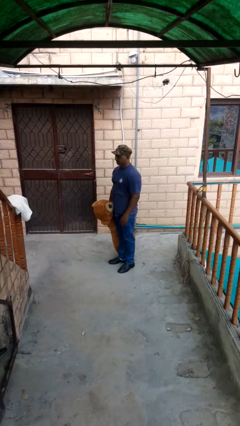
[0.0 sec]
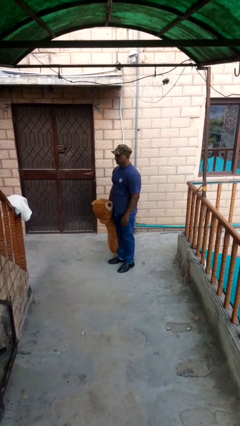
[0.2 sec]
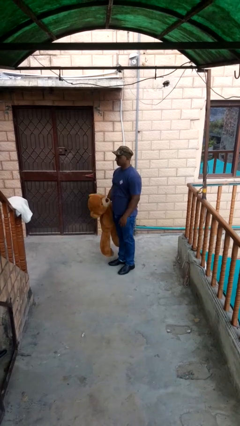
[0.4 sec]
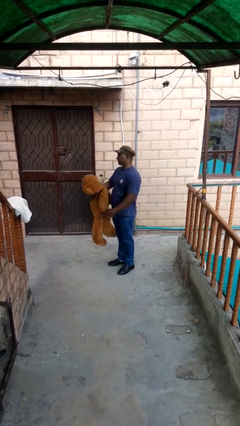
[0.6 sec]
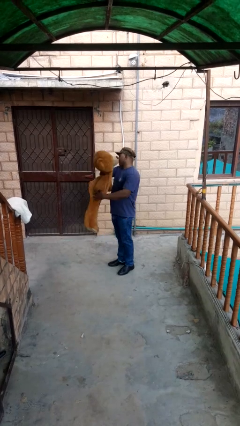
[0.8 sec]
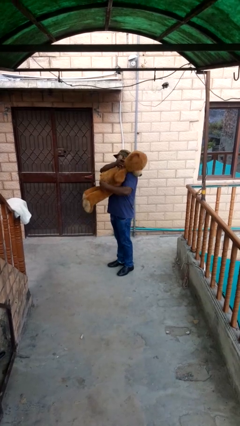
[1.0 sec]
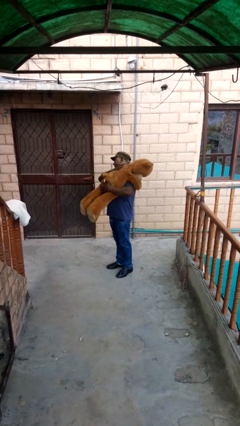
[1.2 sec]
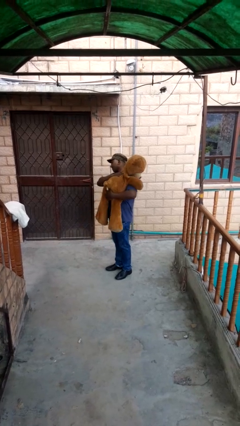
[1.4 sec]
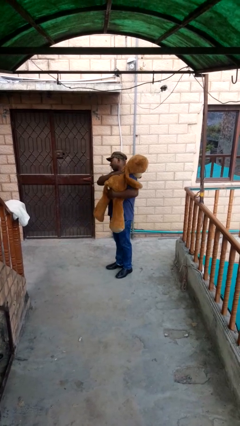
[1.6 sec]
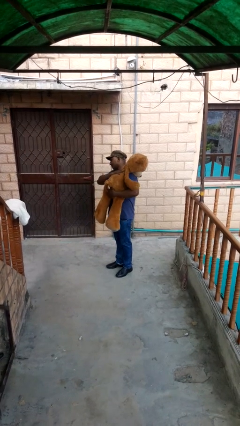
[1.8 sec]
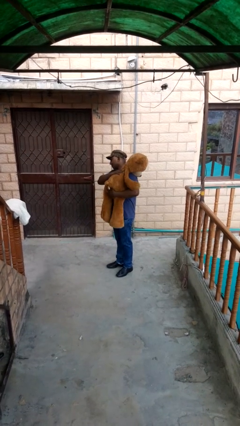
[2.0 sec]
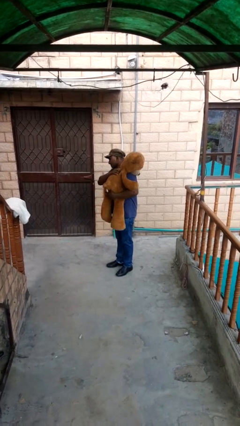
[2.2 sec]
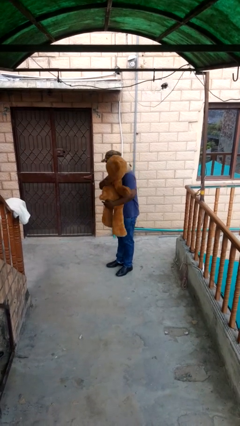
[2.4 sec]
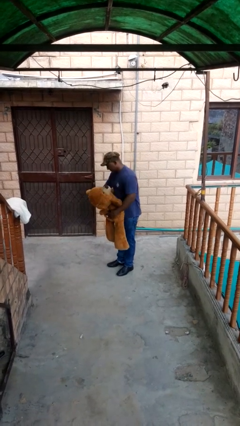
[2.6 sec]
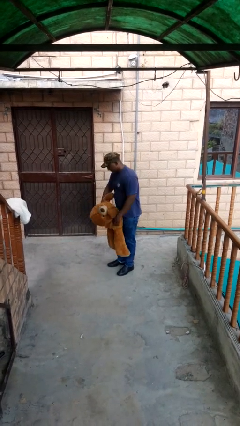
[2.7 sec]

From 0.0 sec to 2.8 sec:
person hugs stuffed animal

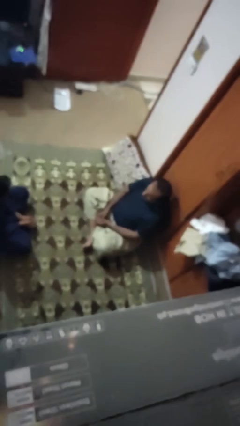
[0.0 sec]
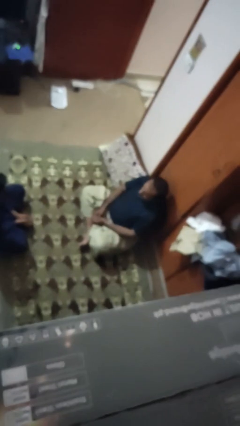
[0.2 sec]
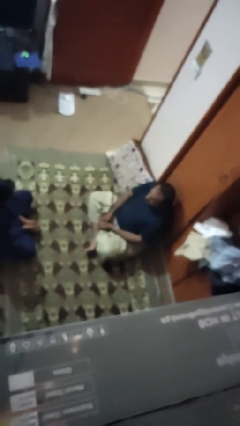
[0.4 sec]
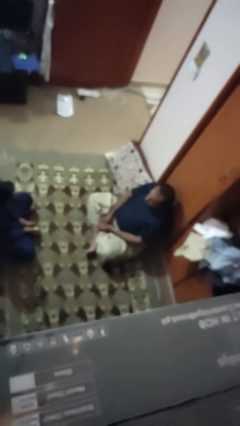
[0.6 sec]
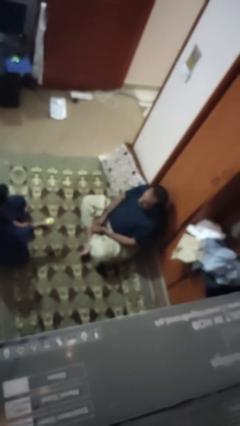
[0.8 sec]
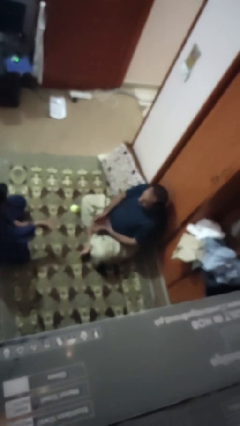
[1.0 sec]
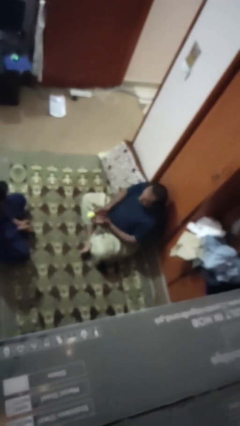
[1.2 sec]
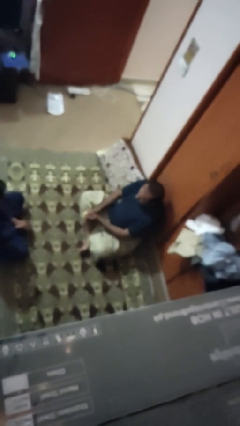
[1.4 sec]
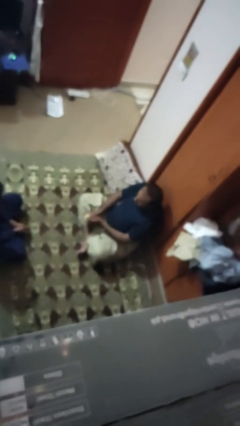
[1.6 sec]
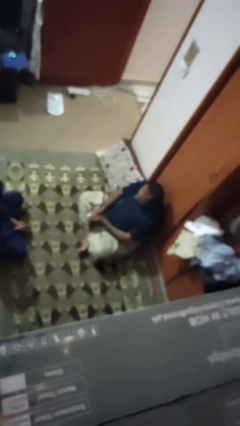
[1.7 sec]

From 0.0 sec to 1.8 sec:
person catches object from person

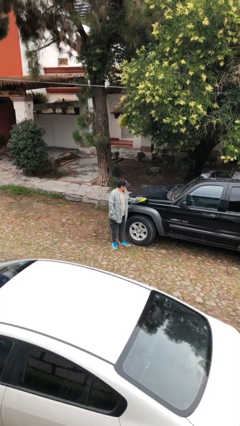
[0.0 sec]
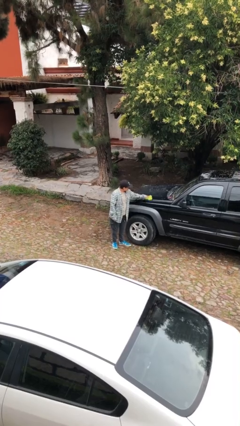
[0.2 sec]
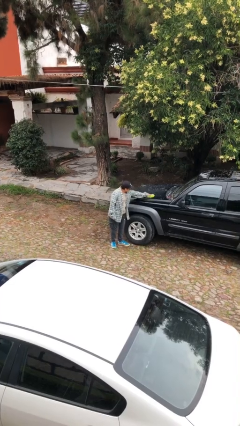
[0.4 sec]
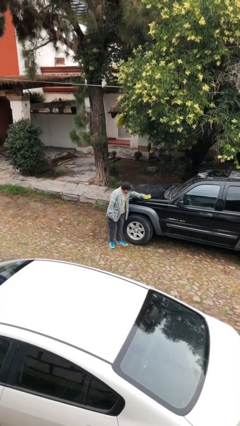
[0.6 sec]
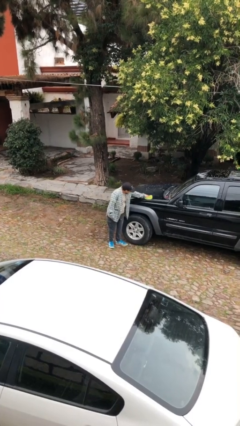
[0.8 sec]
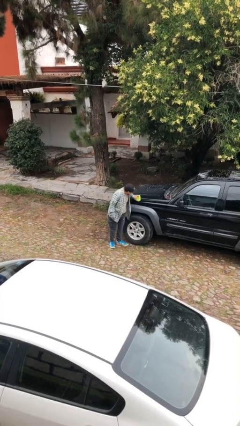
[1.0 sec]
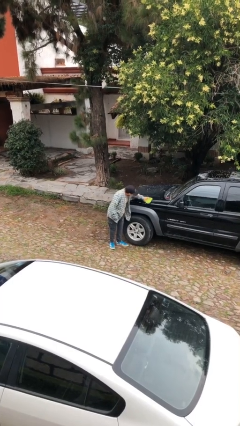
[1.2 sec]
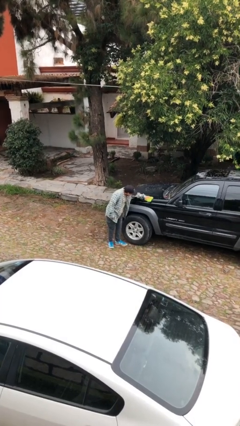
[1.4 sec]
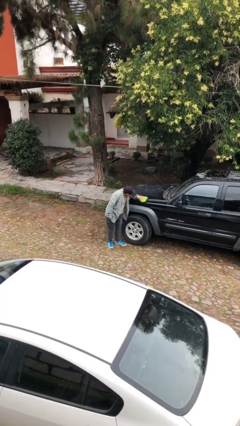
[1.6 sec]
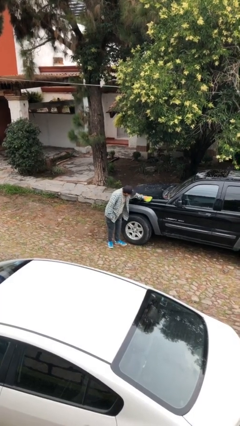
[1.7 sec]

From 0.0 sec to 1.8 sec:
person polishes car with rag

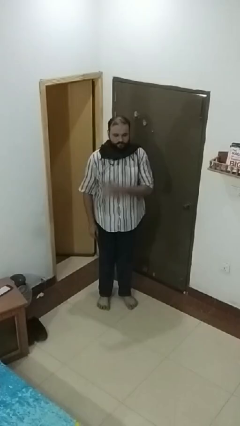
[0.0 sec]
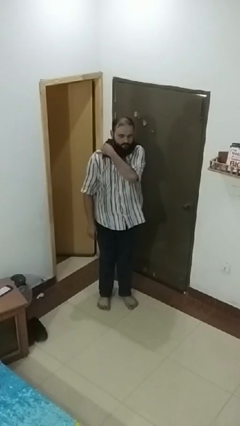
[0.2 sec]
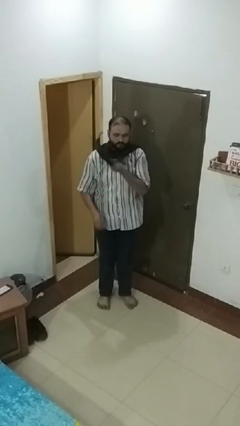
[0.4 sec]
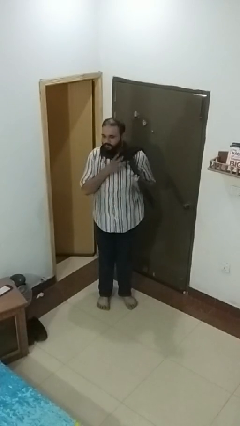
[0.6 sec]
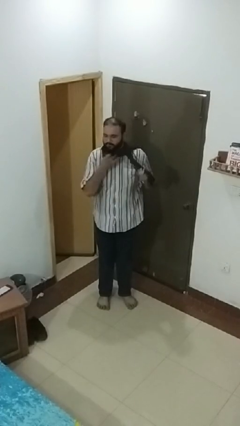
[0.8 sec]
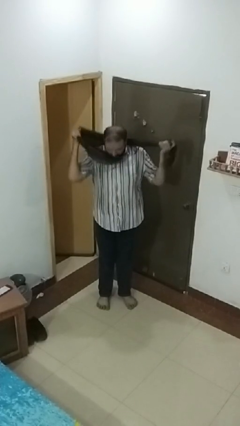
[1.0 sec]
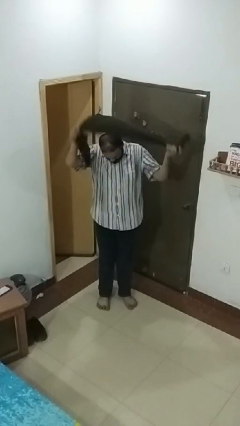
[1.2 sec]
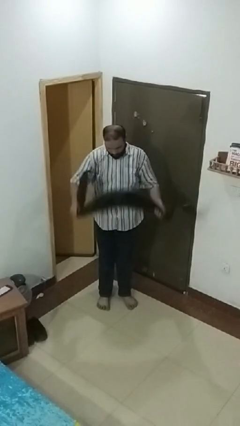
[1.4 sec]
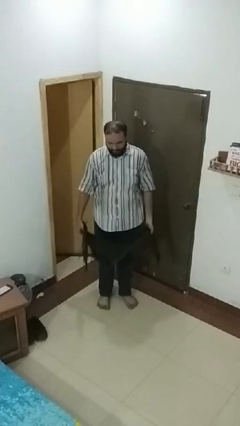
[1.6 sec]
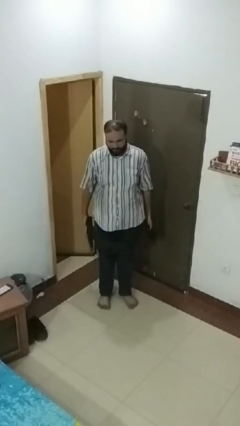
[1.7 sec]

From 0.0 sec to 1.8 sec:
person takes off scarf

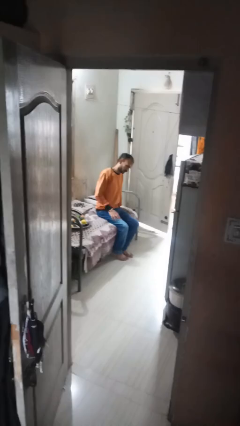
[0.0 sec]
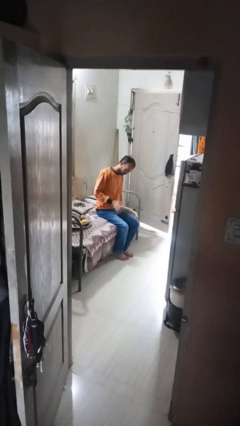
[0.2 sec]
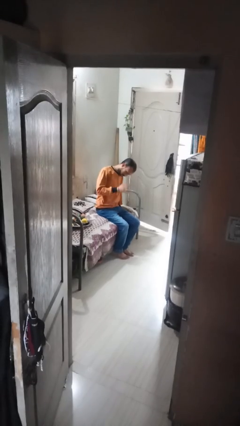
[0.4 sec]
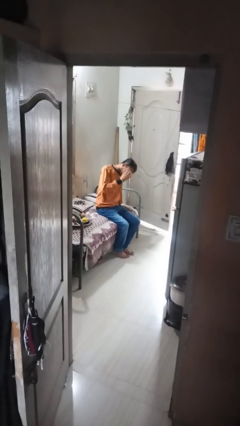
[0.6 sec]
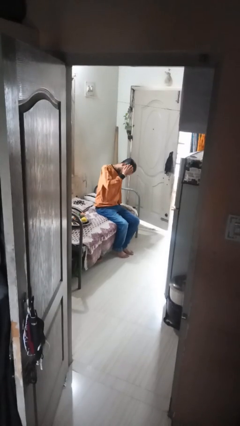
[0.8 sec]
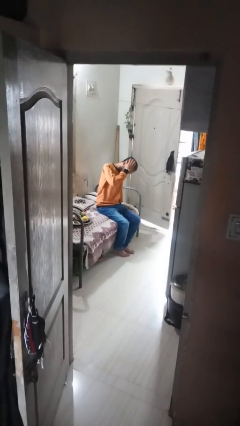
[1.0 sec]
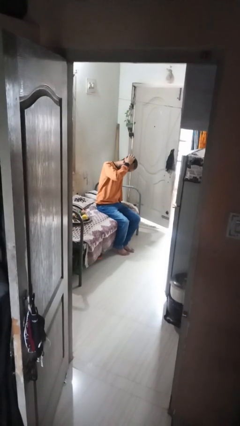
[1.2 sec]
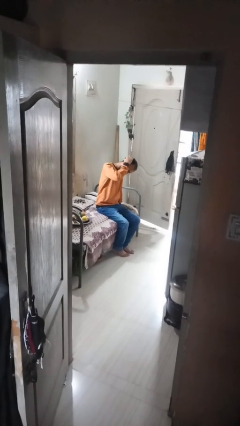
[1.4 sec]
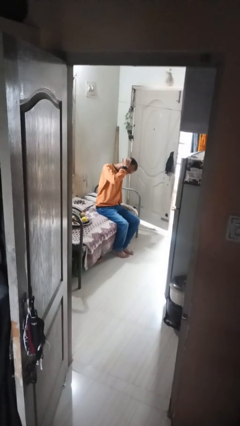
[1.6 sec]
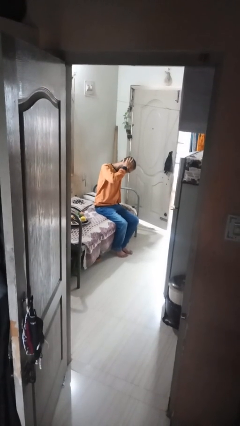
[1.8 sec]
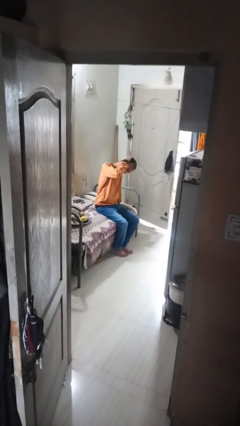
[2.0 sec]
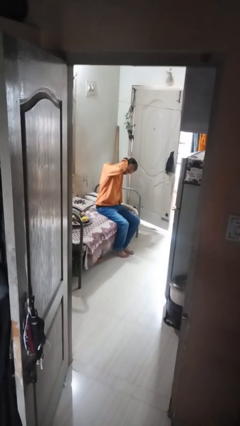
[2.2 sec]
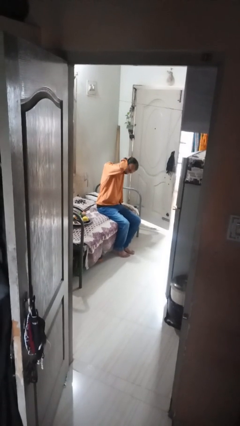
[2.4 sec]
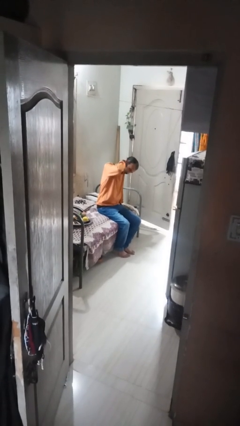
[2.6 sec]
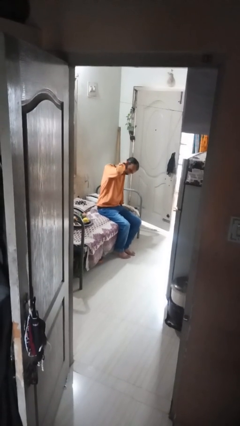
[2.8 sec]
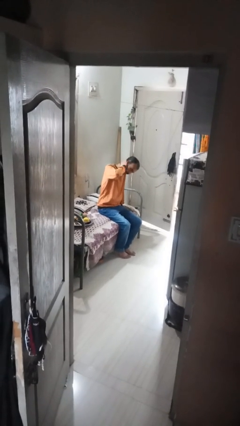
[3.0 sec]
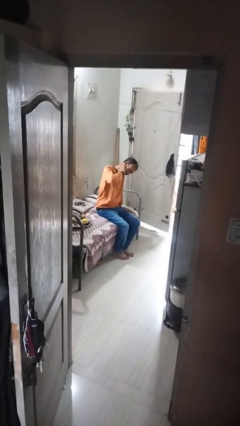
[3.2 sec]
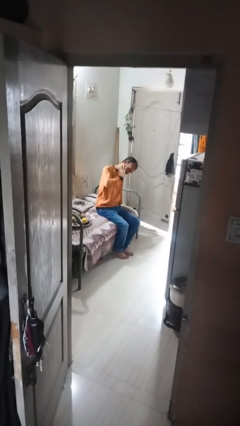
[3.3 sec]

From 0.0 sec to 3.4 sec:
person strokes hair

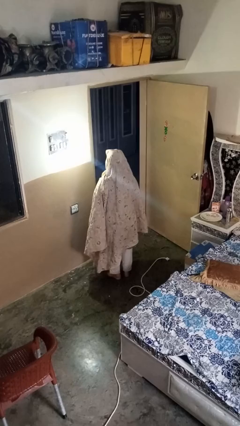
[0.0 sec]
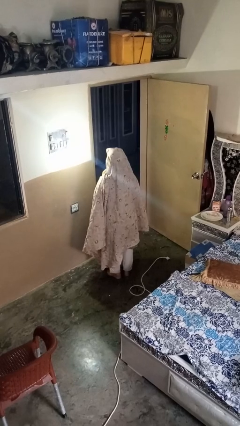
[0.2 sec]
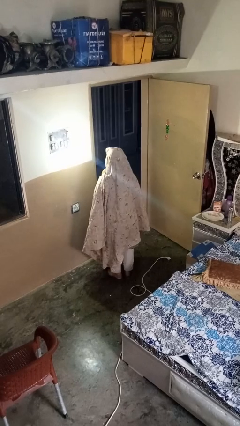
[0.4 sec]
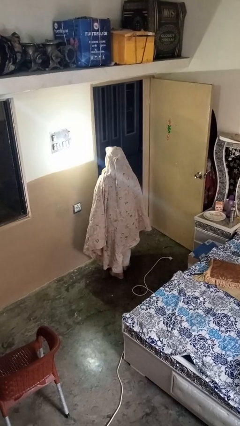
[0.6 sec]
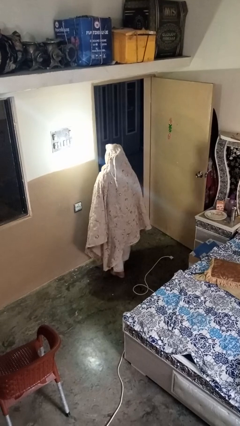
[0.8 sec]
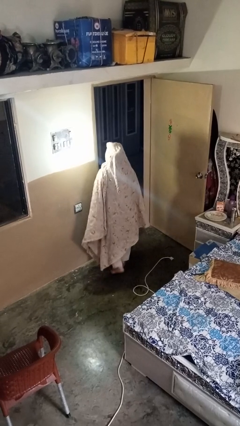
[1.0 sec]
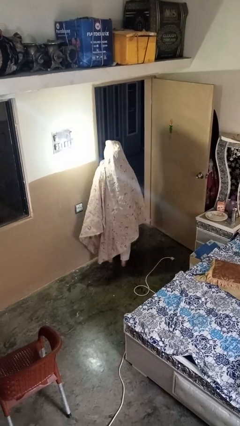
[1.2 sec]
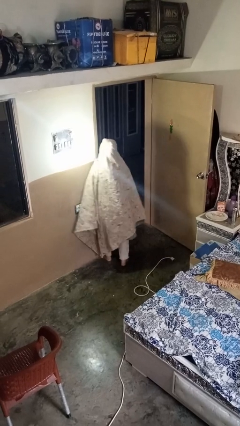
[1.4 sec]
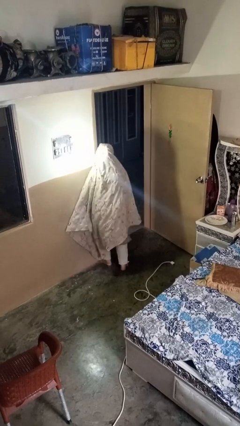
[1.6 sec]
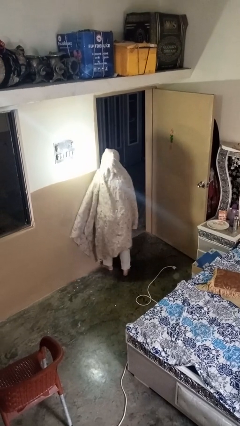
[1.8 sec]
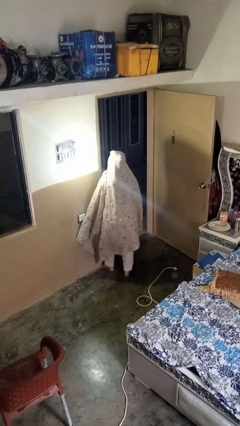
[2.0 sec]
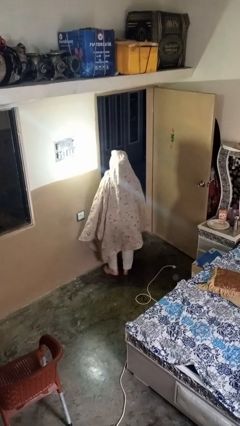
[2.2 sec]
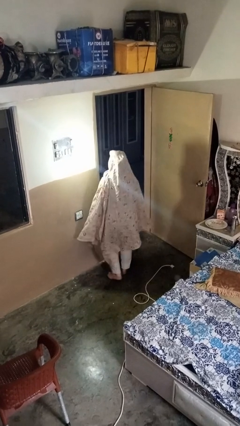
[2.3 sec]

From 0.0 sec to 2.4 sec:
person bumps into wall

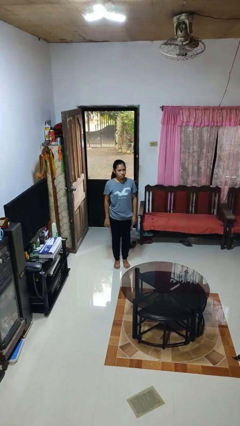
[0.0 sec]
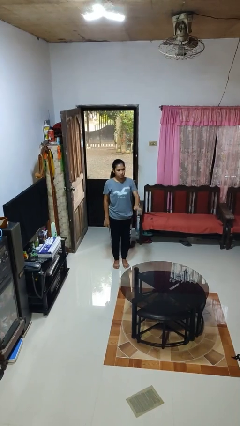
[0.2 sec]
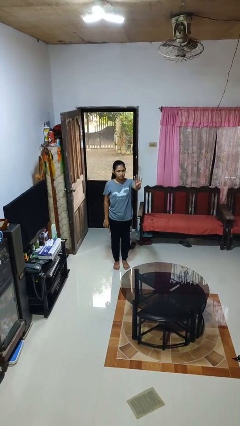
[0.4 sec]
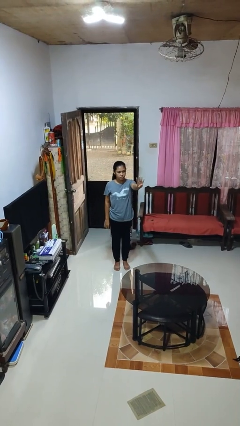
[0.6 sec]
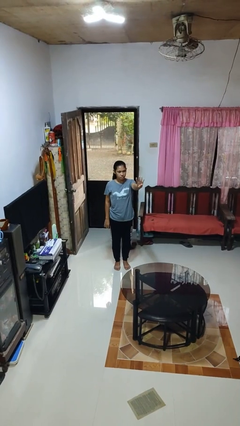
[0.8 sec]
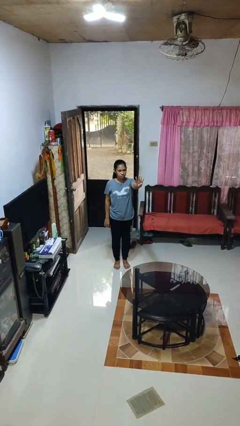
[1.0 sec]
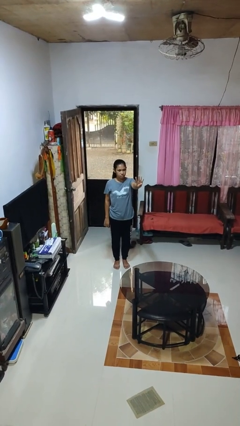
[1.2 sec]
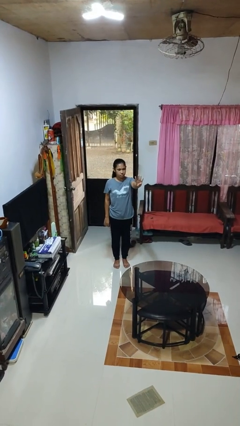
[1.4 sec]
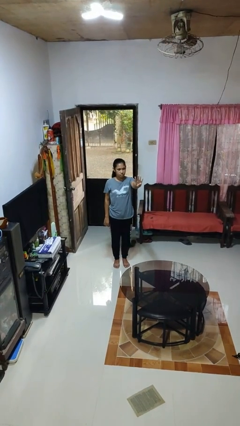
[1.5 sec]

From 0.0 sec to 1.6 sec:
person gestures number four

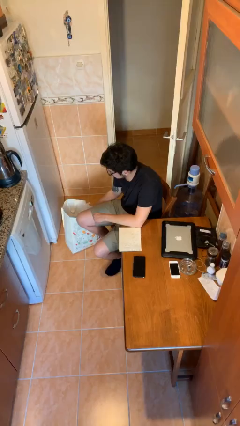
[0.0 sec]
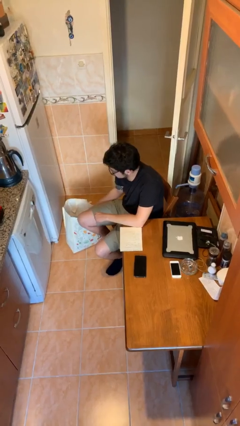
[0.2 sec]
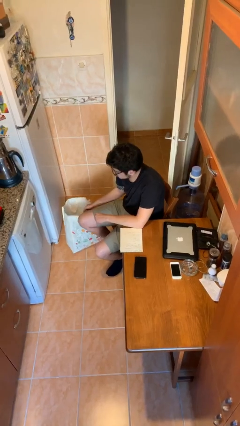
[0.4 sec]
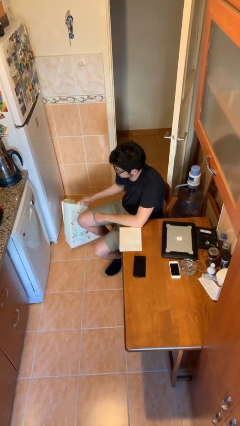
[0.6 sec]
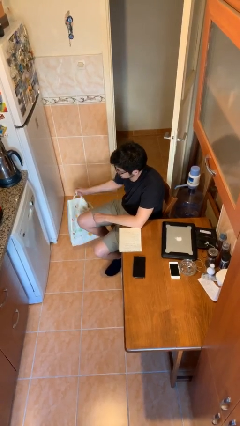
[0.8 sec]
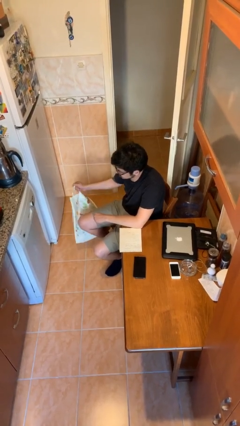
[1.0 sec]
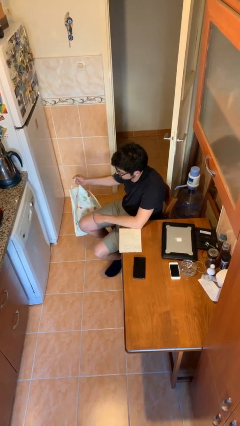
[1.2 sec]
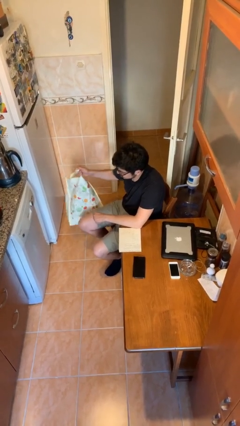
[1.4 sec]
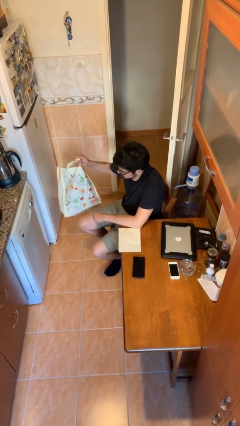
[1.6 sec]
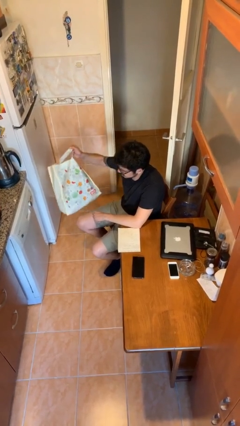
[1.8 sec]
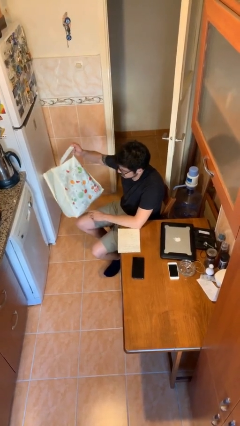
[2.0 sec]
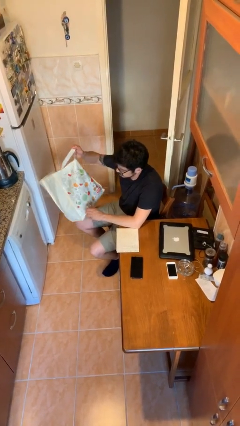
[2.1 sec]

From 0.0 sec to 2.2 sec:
person picks up object from floor
